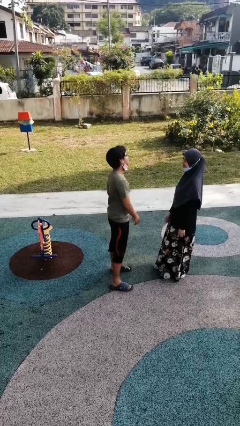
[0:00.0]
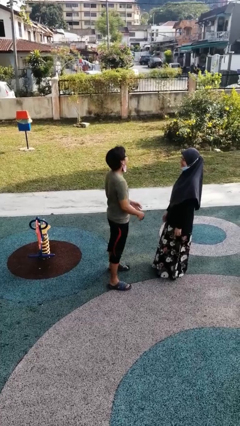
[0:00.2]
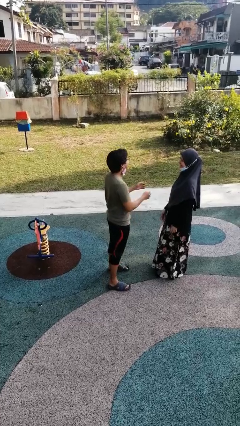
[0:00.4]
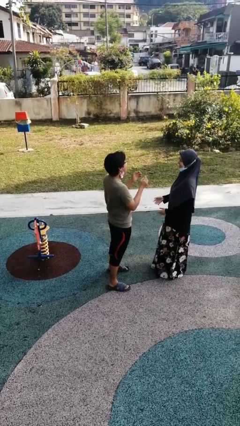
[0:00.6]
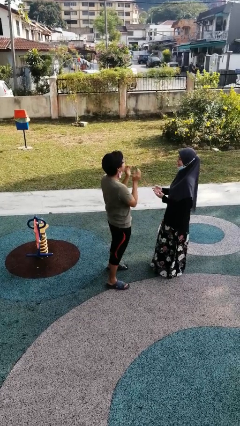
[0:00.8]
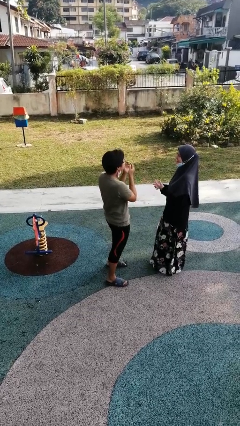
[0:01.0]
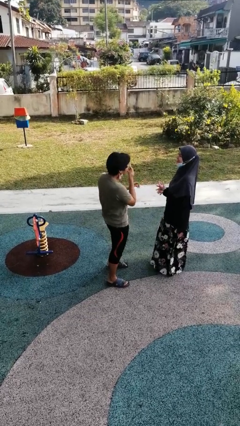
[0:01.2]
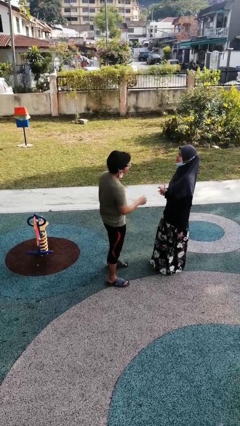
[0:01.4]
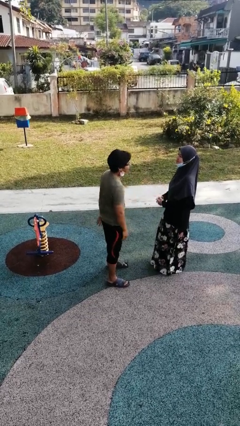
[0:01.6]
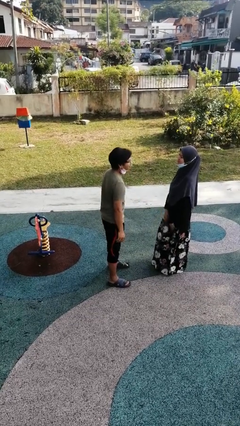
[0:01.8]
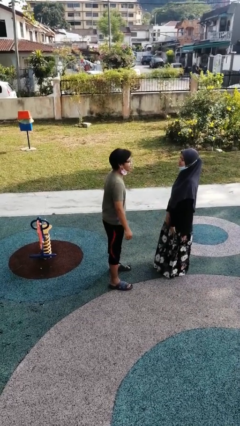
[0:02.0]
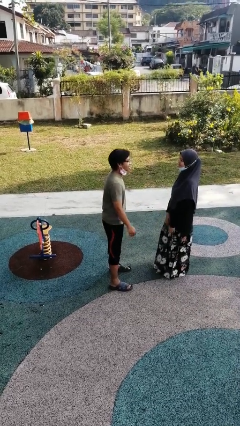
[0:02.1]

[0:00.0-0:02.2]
person laughs with person

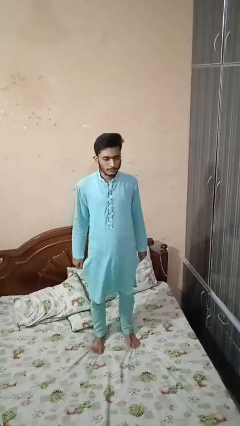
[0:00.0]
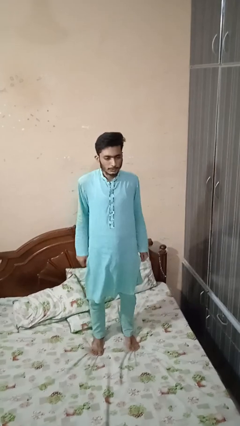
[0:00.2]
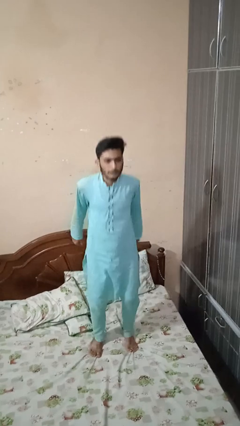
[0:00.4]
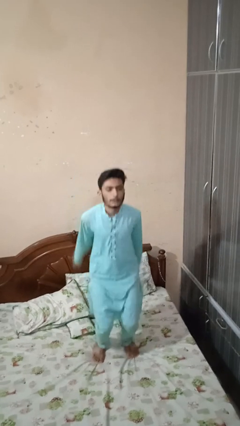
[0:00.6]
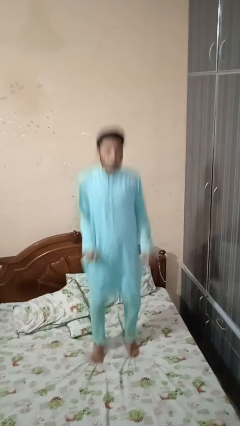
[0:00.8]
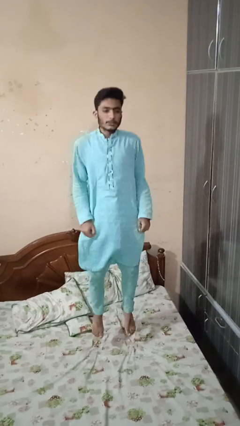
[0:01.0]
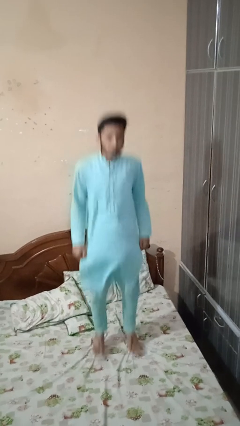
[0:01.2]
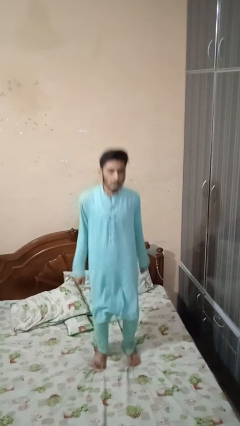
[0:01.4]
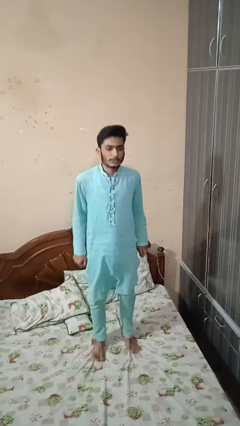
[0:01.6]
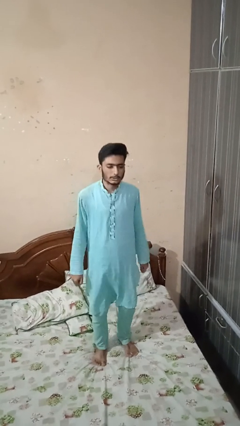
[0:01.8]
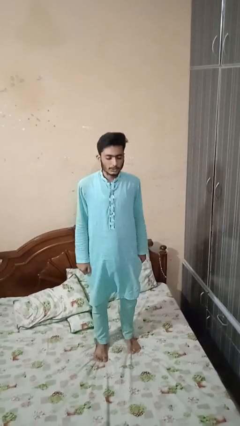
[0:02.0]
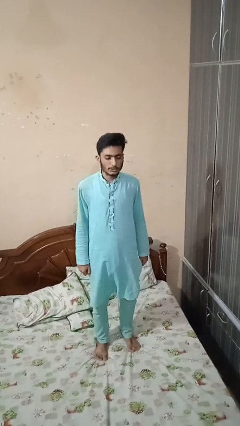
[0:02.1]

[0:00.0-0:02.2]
person jumps on bed

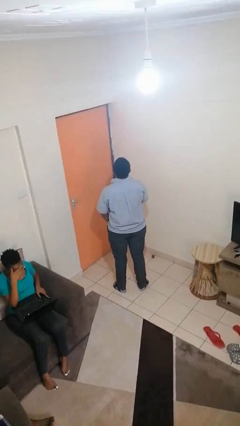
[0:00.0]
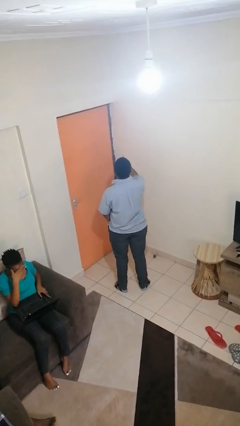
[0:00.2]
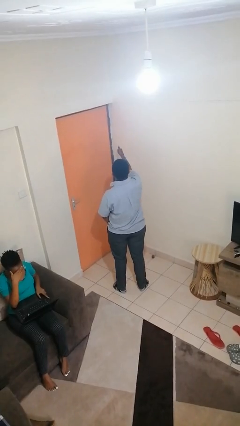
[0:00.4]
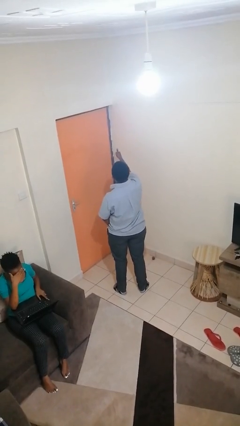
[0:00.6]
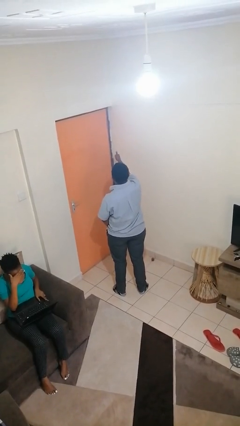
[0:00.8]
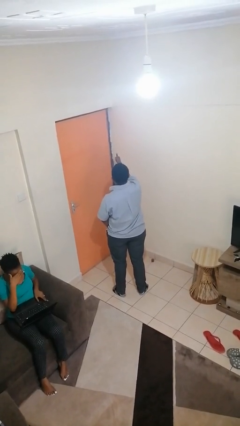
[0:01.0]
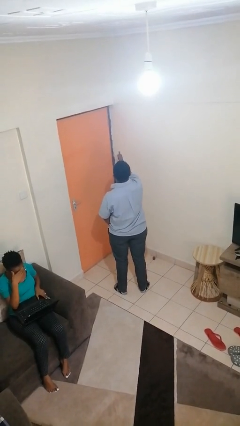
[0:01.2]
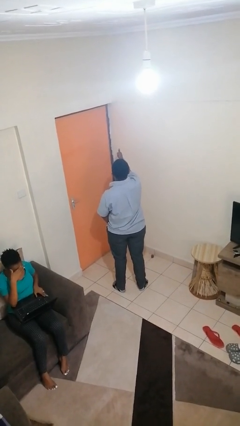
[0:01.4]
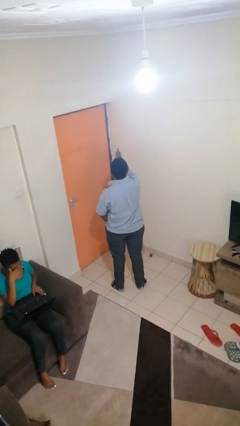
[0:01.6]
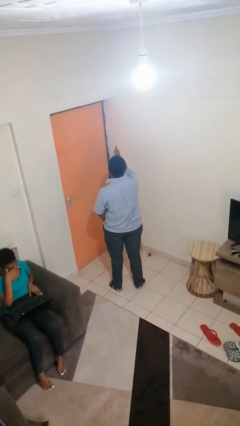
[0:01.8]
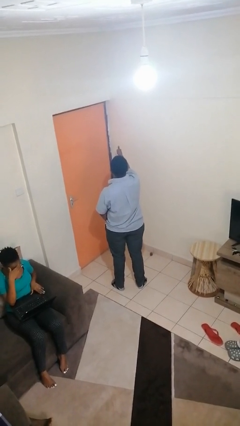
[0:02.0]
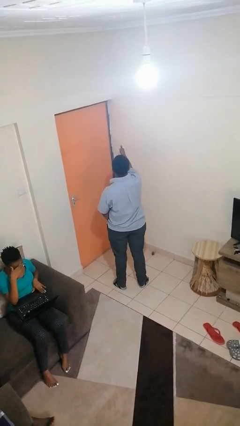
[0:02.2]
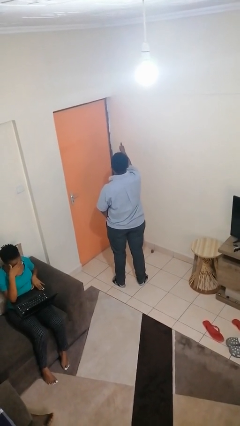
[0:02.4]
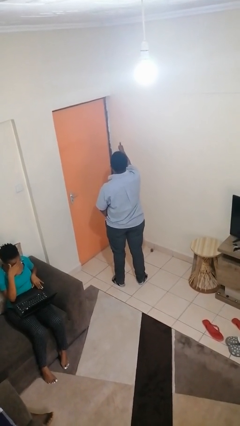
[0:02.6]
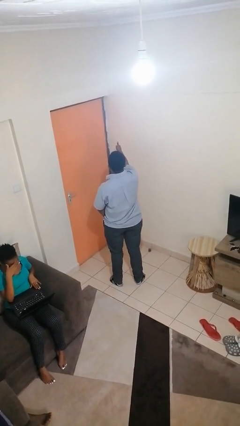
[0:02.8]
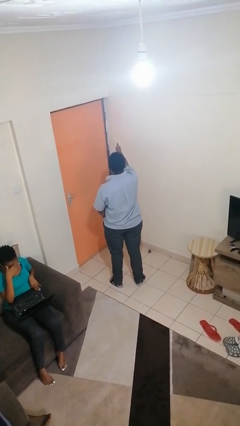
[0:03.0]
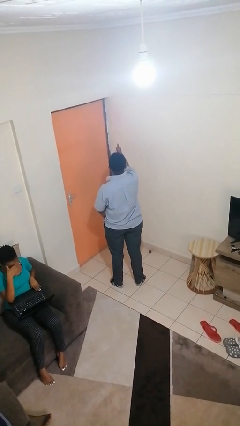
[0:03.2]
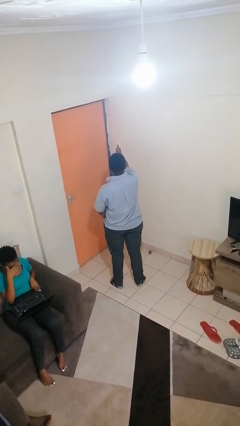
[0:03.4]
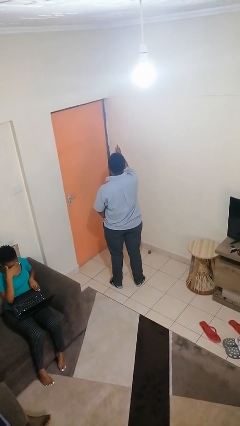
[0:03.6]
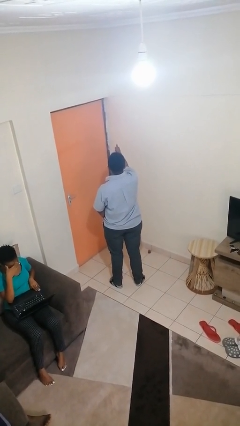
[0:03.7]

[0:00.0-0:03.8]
person gestures thumbs up

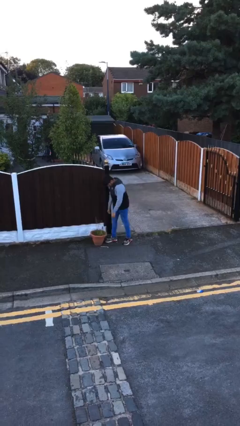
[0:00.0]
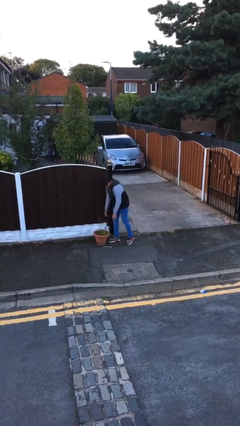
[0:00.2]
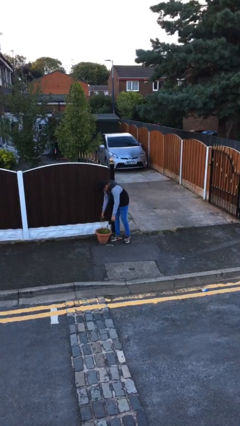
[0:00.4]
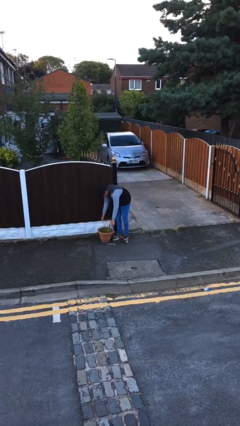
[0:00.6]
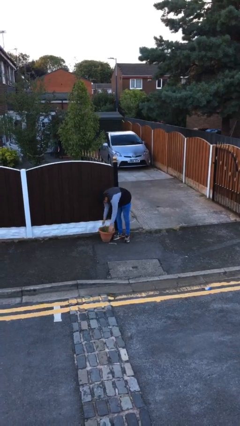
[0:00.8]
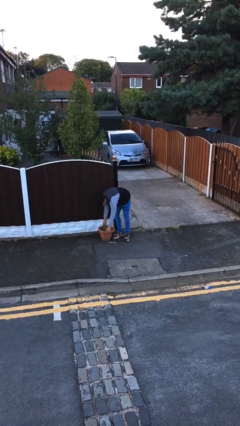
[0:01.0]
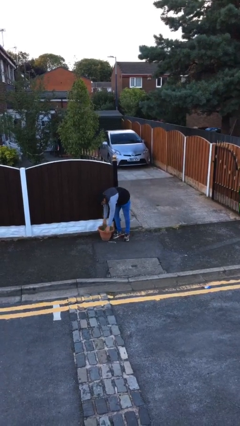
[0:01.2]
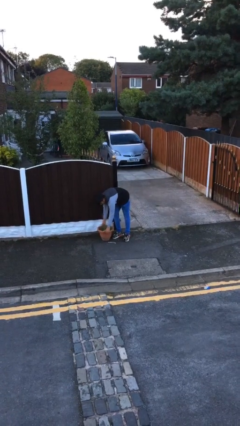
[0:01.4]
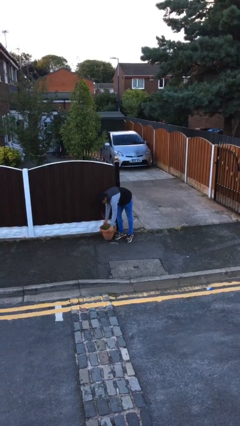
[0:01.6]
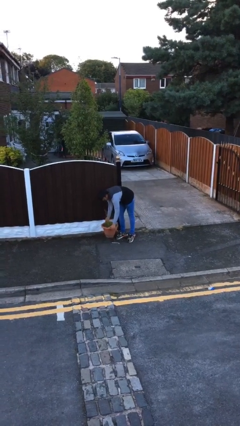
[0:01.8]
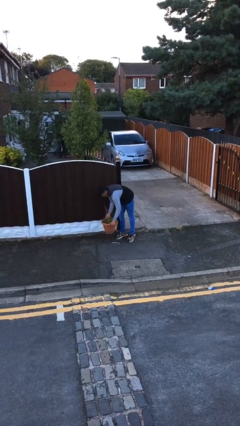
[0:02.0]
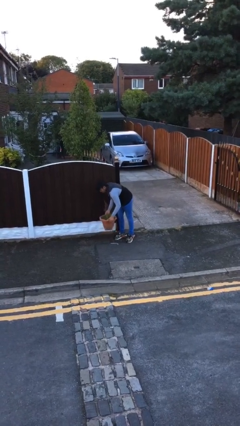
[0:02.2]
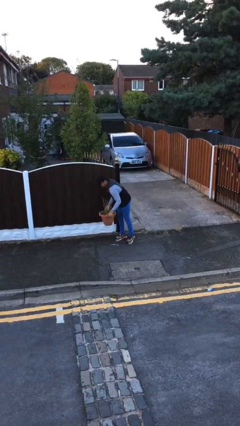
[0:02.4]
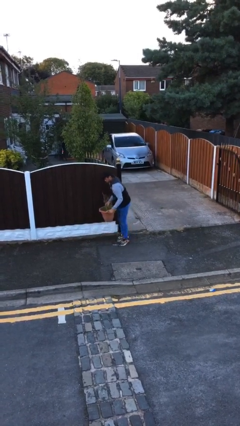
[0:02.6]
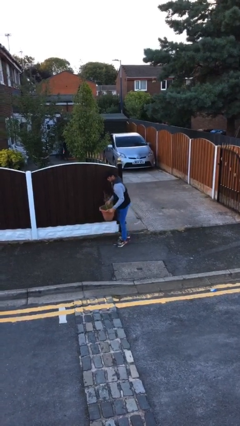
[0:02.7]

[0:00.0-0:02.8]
person picks up object from floor

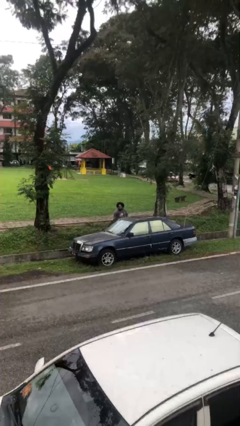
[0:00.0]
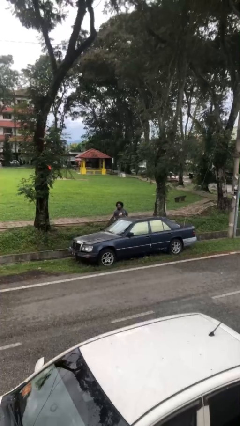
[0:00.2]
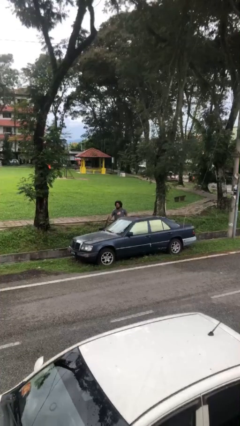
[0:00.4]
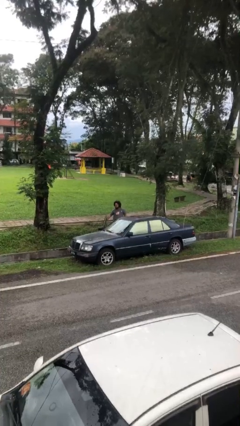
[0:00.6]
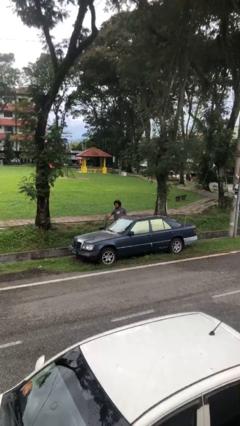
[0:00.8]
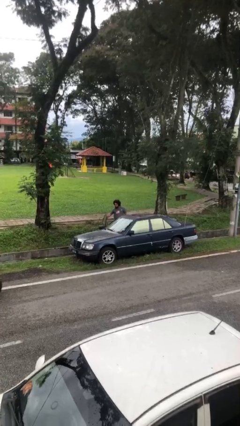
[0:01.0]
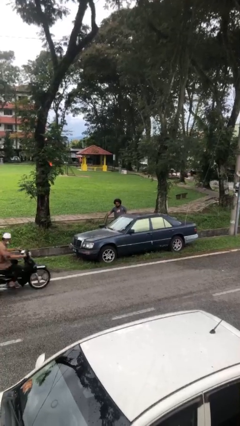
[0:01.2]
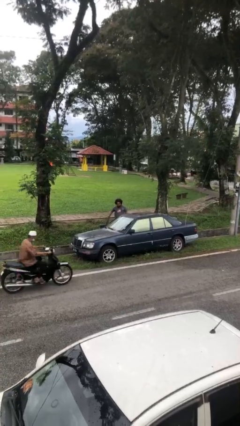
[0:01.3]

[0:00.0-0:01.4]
person opens car door

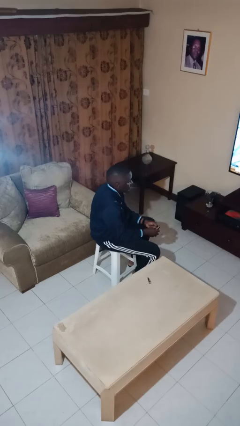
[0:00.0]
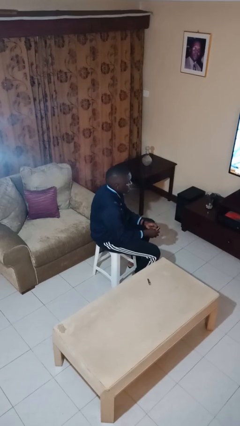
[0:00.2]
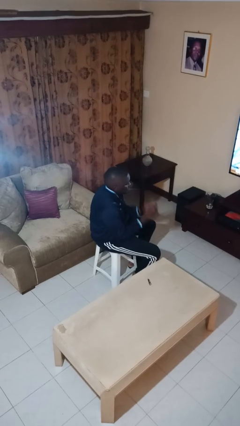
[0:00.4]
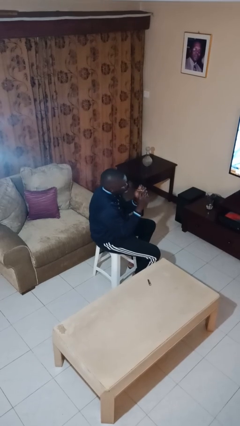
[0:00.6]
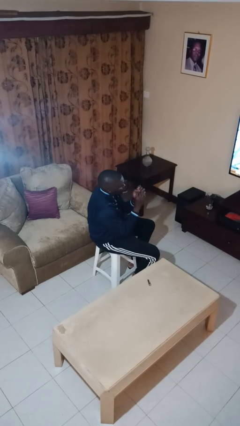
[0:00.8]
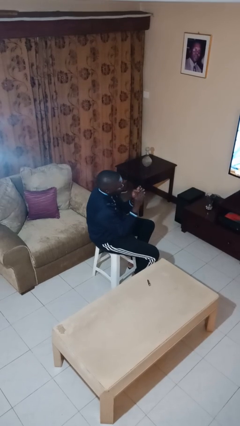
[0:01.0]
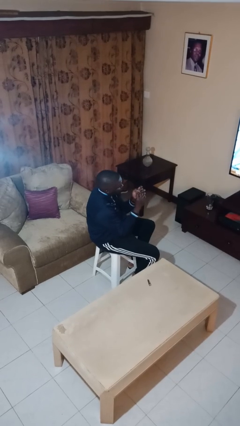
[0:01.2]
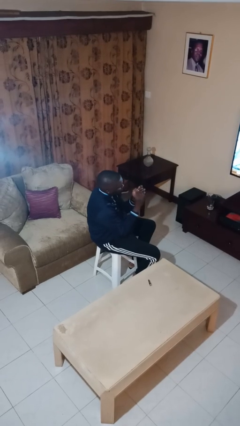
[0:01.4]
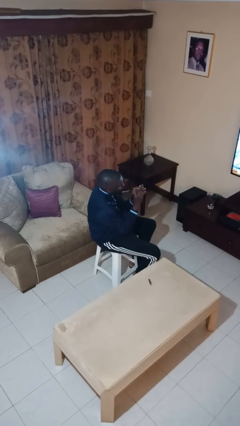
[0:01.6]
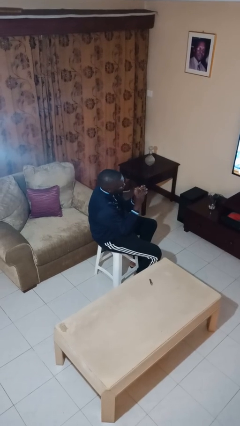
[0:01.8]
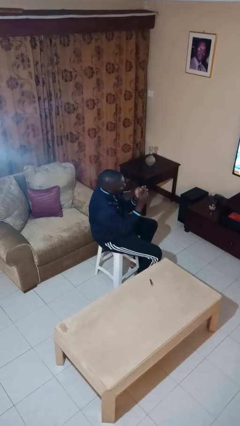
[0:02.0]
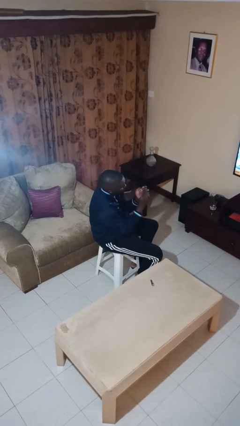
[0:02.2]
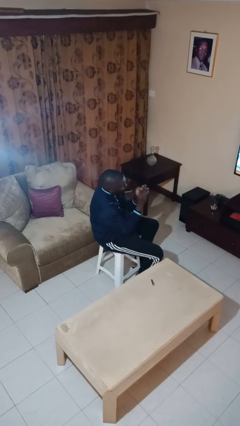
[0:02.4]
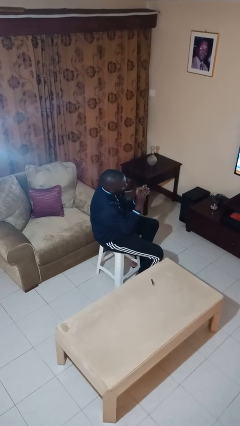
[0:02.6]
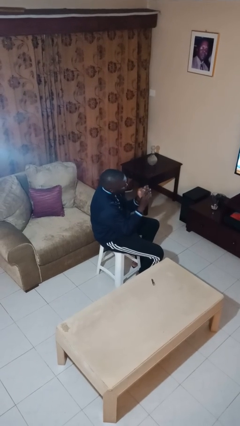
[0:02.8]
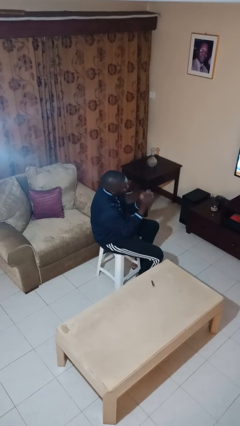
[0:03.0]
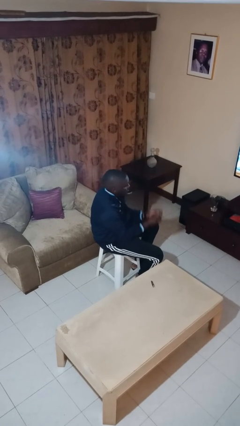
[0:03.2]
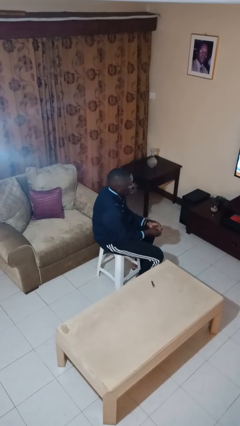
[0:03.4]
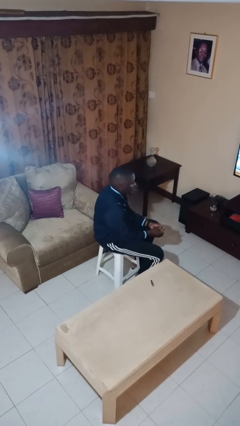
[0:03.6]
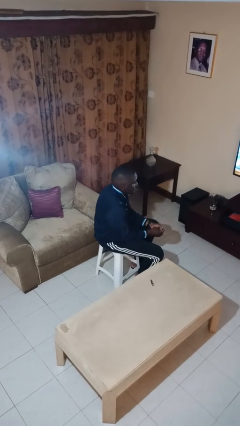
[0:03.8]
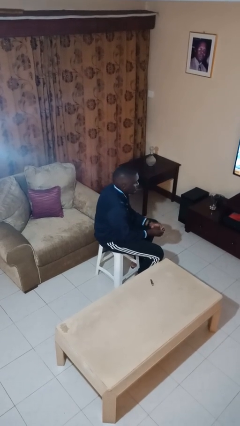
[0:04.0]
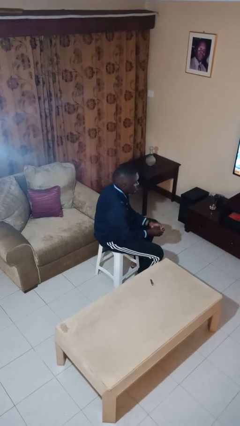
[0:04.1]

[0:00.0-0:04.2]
person files fingernails

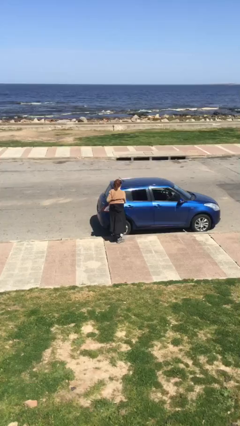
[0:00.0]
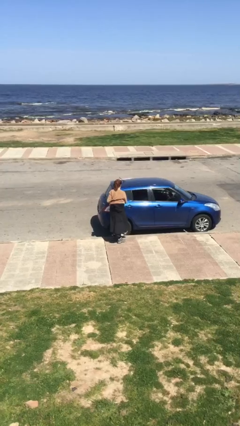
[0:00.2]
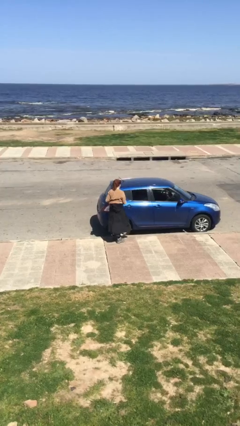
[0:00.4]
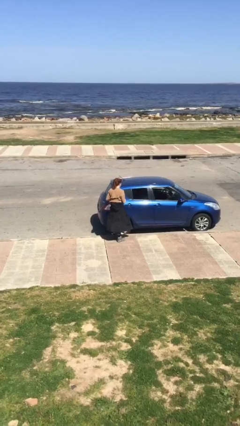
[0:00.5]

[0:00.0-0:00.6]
person closes car door

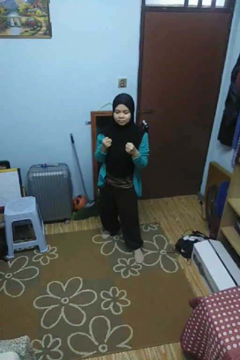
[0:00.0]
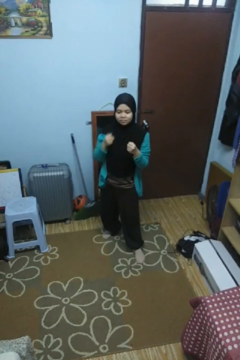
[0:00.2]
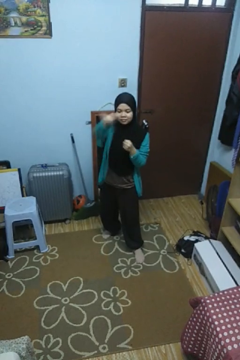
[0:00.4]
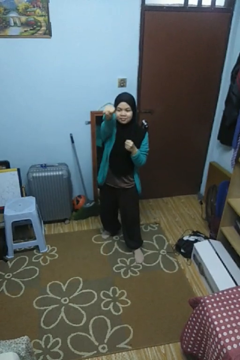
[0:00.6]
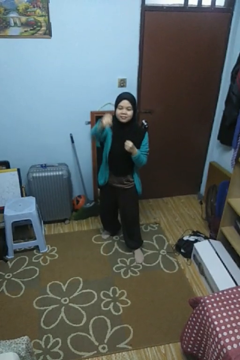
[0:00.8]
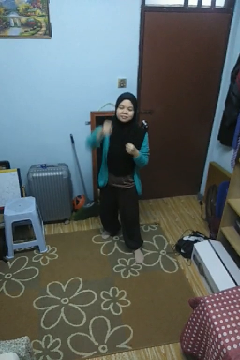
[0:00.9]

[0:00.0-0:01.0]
person punches
